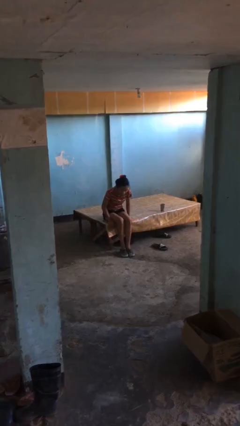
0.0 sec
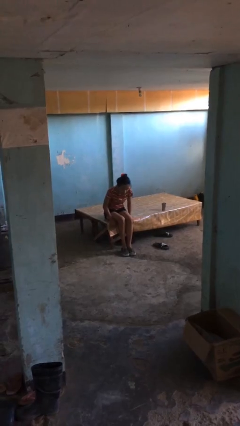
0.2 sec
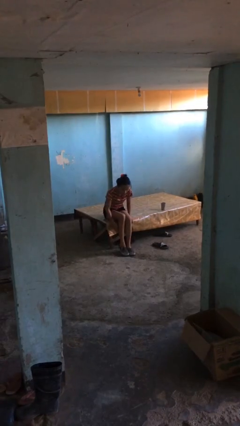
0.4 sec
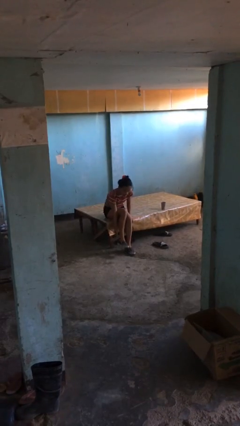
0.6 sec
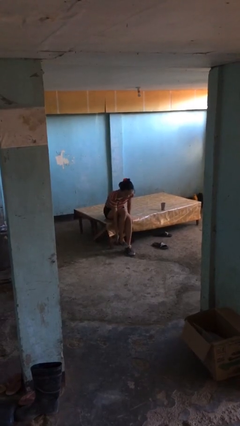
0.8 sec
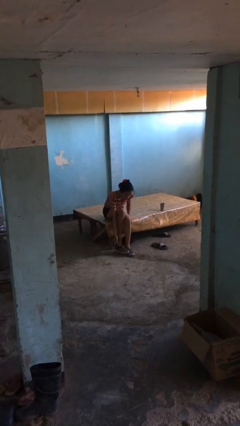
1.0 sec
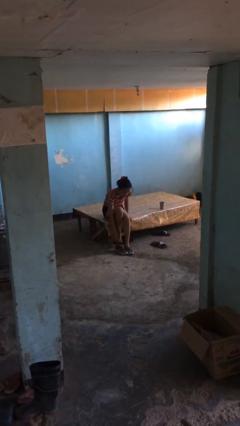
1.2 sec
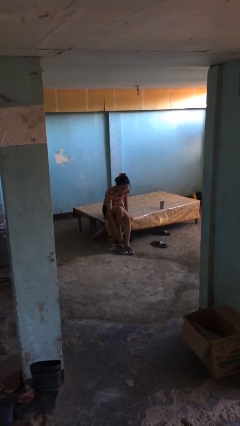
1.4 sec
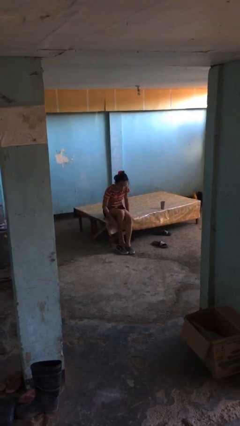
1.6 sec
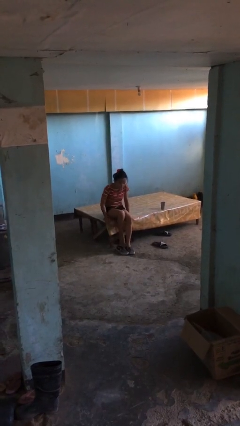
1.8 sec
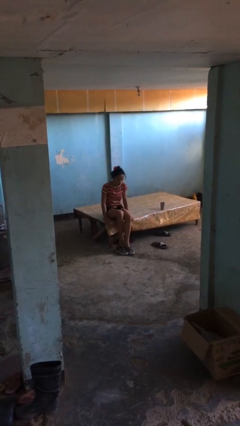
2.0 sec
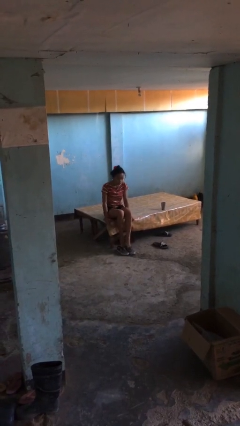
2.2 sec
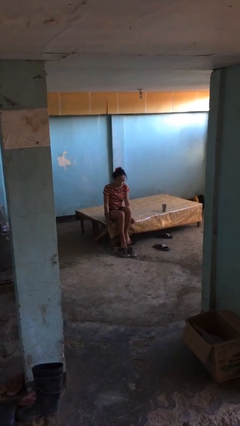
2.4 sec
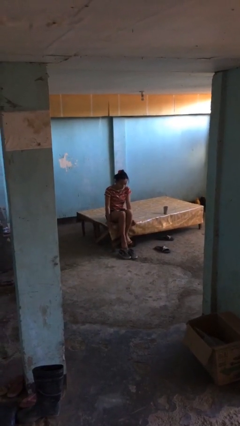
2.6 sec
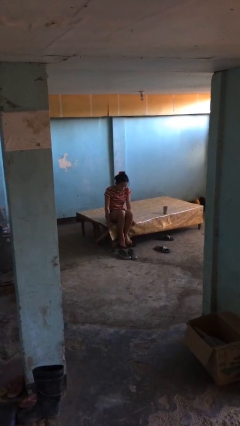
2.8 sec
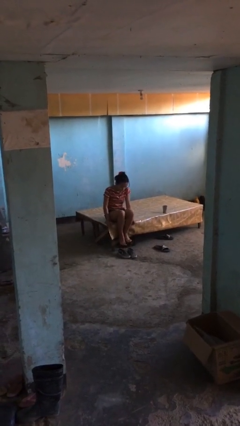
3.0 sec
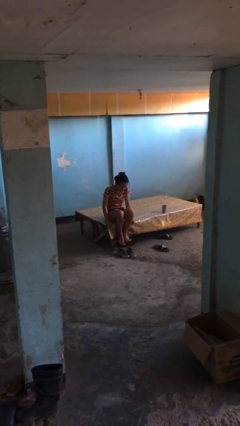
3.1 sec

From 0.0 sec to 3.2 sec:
person takes off shoes

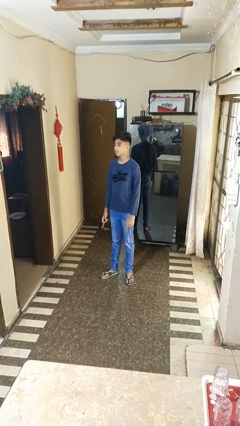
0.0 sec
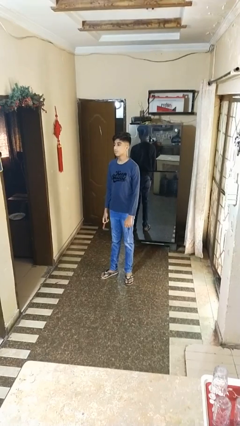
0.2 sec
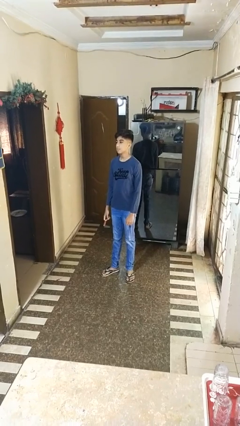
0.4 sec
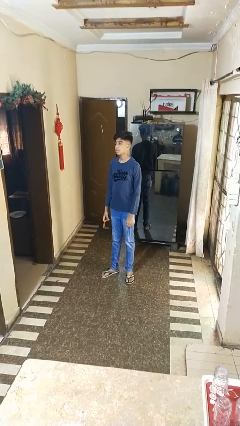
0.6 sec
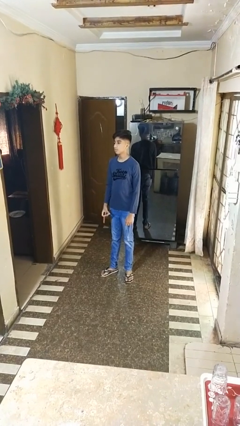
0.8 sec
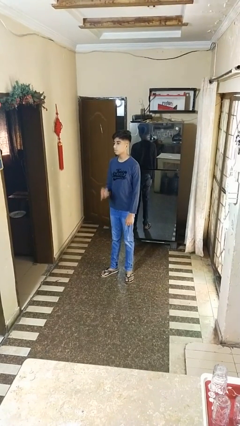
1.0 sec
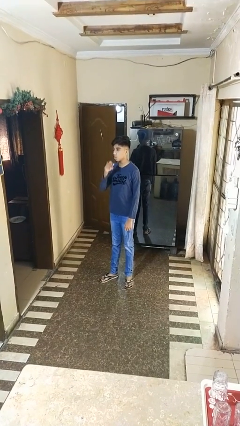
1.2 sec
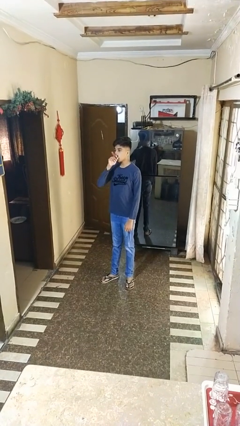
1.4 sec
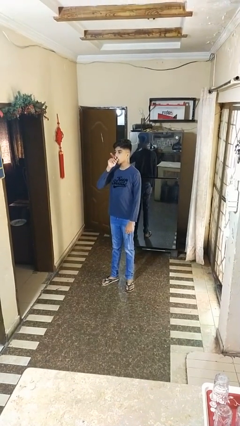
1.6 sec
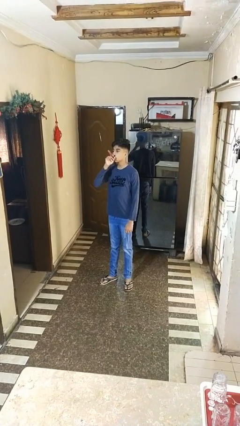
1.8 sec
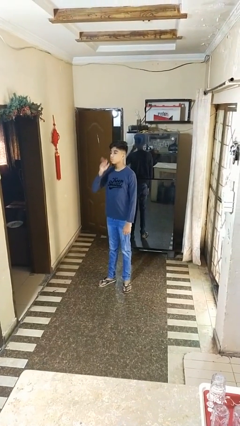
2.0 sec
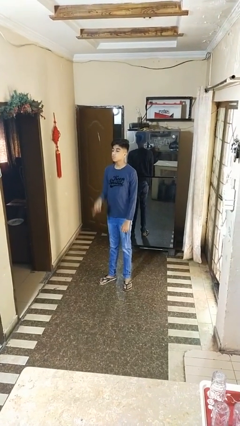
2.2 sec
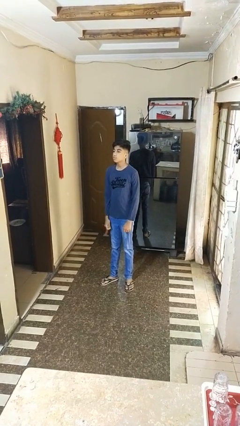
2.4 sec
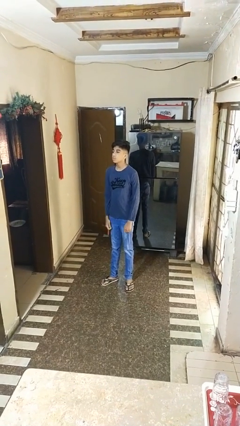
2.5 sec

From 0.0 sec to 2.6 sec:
person vapes

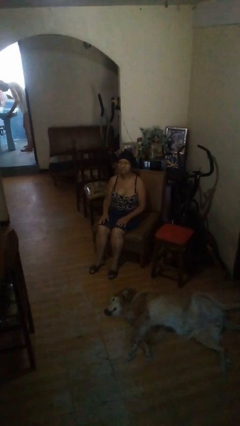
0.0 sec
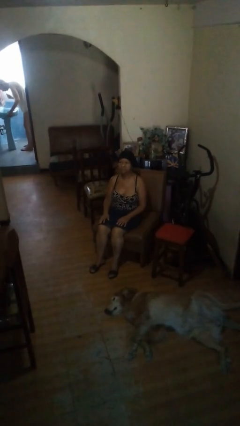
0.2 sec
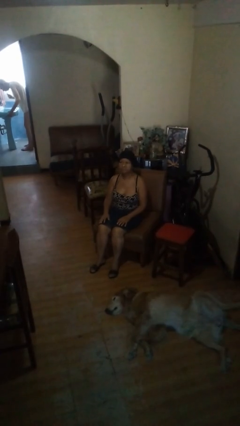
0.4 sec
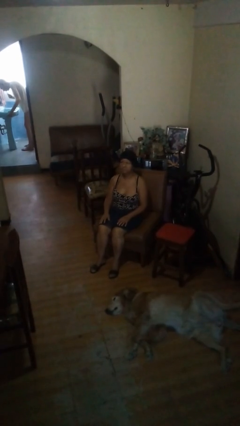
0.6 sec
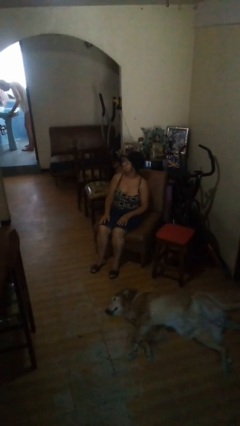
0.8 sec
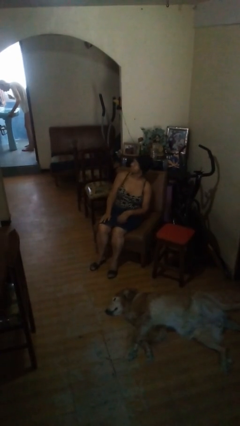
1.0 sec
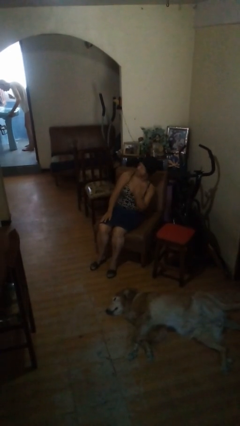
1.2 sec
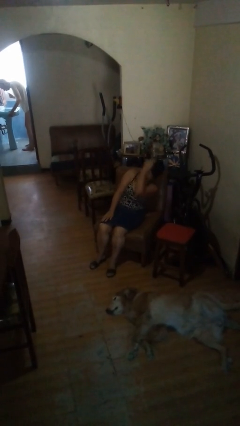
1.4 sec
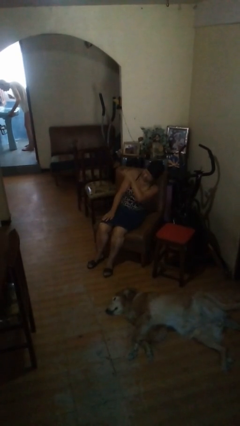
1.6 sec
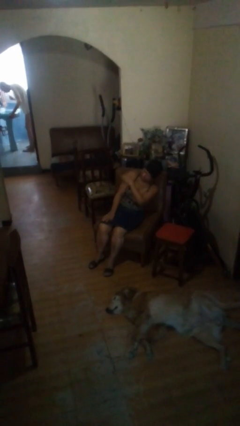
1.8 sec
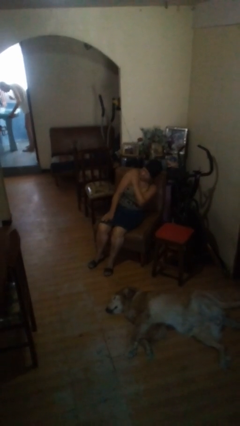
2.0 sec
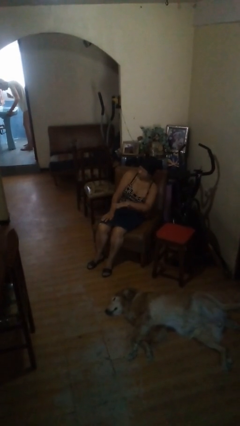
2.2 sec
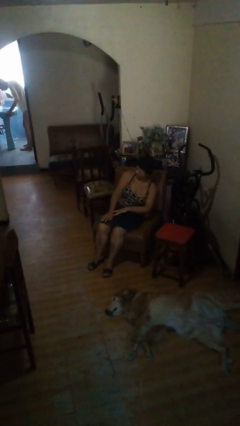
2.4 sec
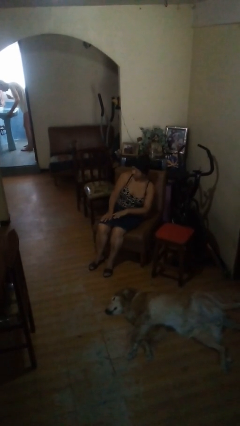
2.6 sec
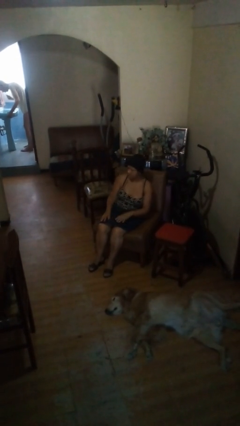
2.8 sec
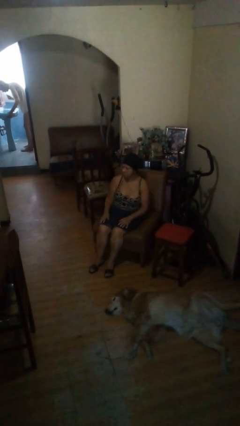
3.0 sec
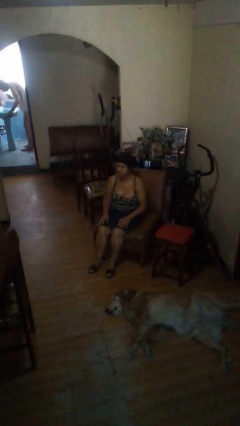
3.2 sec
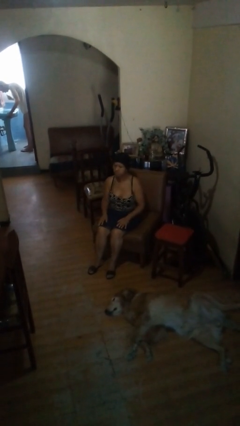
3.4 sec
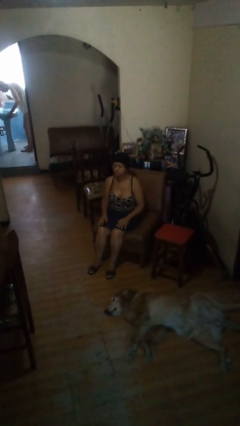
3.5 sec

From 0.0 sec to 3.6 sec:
person swats bug

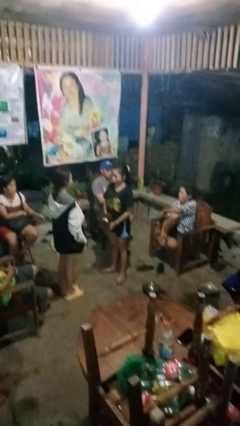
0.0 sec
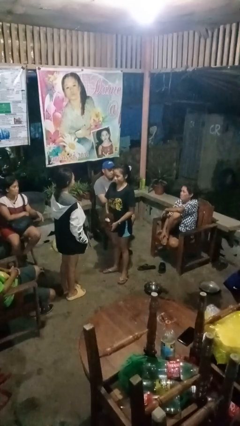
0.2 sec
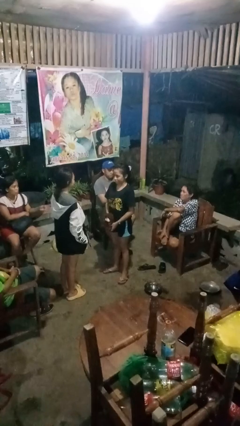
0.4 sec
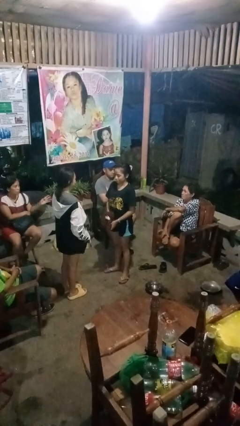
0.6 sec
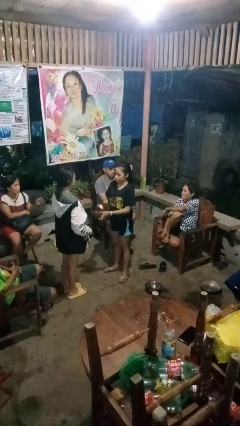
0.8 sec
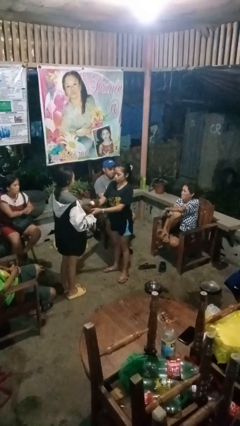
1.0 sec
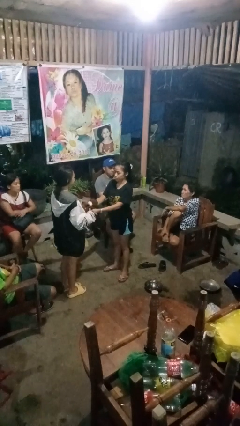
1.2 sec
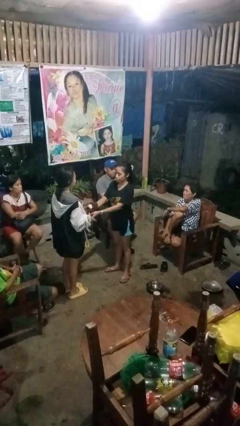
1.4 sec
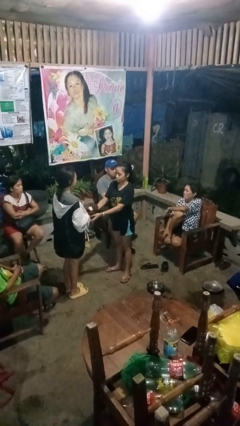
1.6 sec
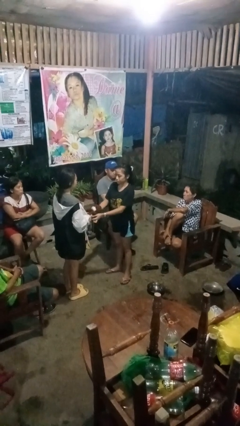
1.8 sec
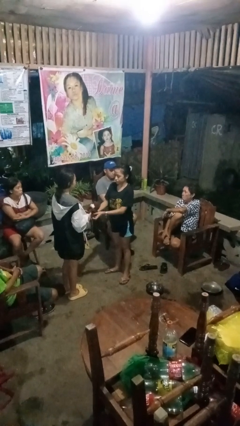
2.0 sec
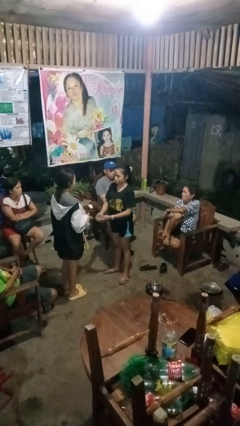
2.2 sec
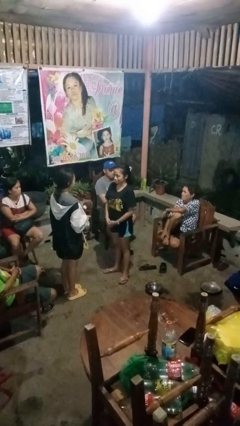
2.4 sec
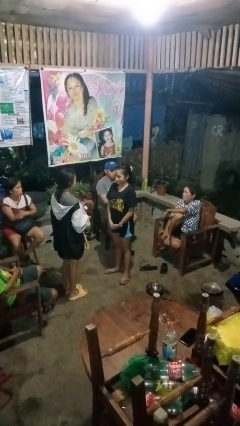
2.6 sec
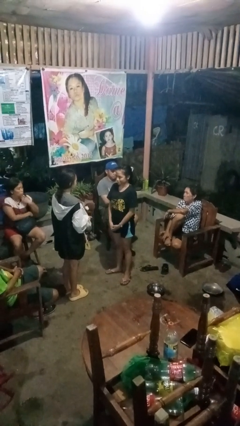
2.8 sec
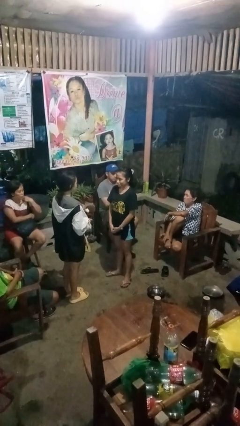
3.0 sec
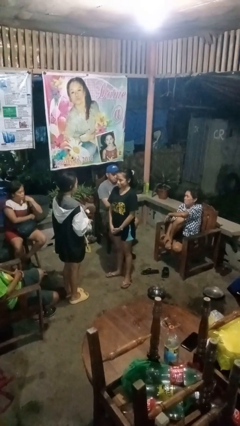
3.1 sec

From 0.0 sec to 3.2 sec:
person transfers object to person

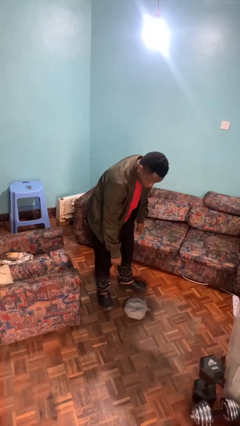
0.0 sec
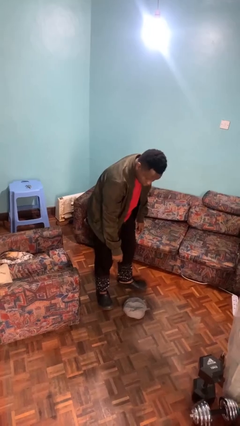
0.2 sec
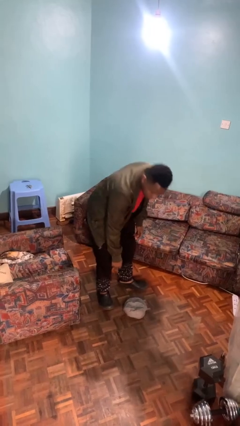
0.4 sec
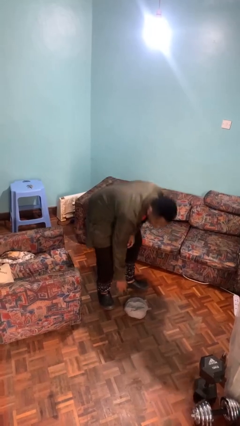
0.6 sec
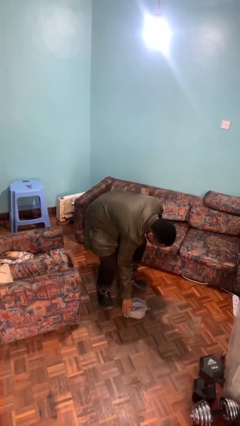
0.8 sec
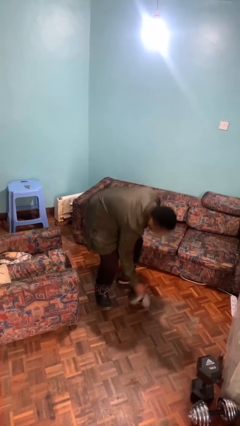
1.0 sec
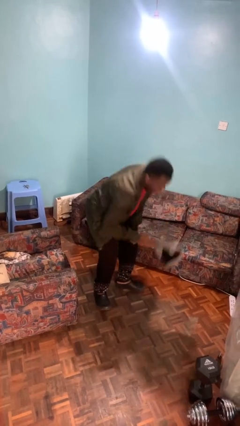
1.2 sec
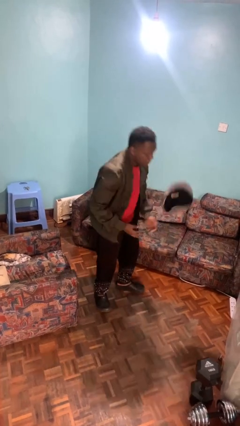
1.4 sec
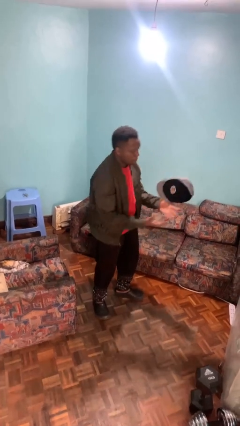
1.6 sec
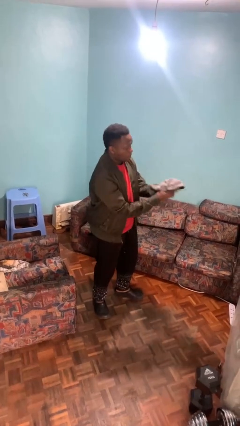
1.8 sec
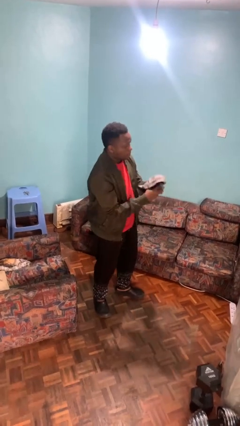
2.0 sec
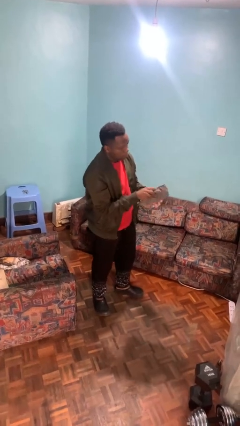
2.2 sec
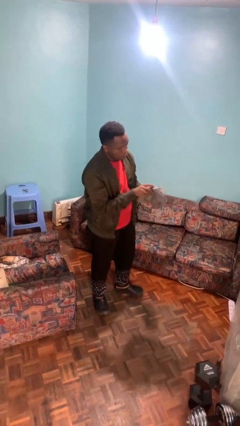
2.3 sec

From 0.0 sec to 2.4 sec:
person picks up object from floor

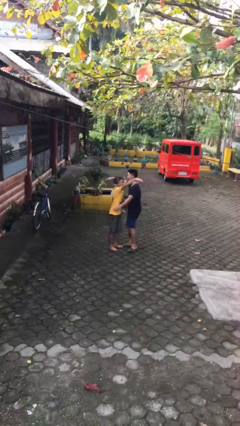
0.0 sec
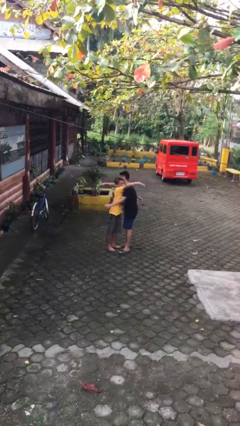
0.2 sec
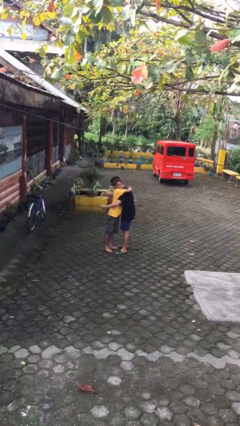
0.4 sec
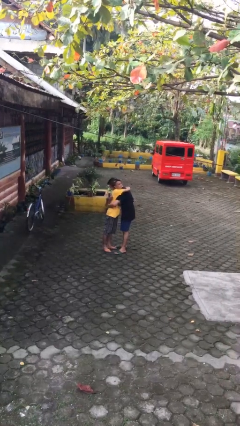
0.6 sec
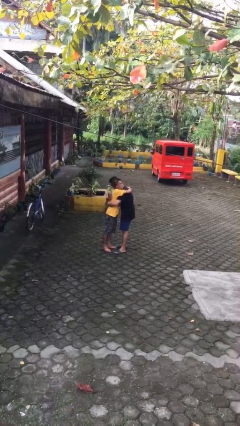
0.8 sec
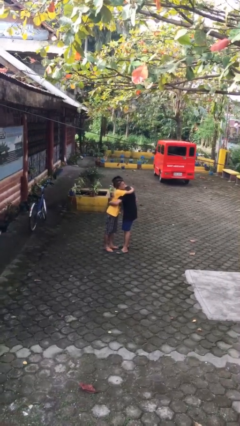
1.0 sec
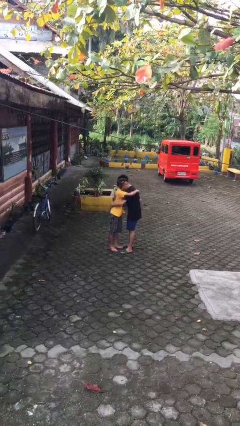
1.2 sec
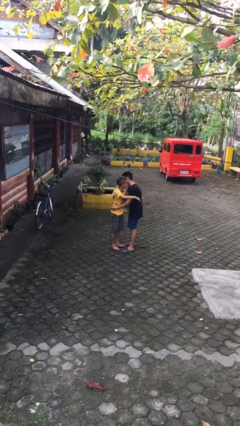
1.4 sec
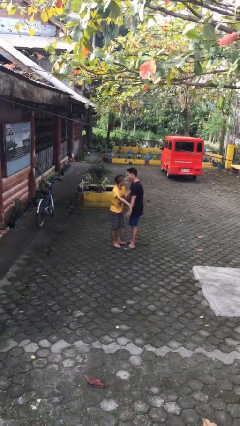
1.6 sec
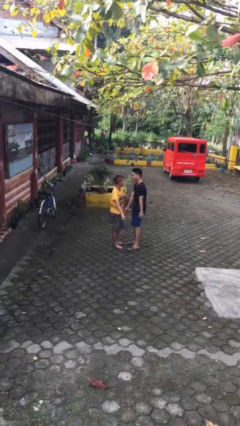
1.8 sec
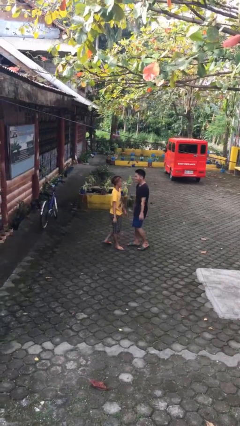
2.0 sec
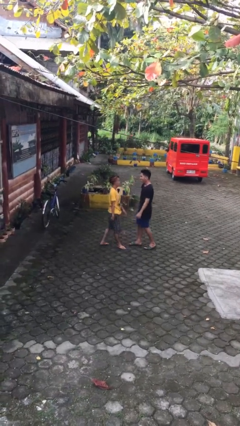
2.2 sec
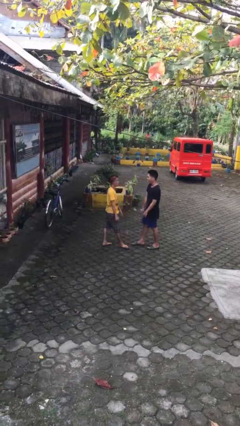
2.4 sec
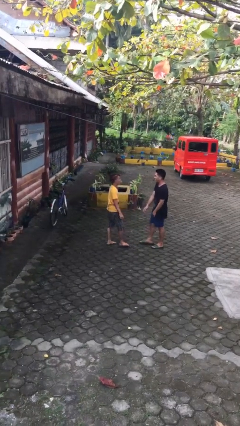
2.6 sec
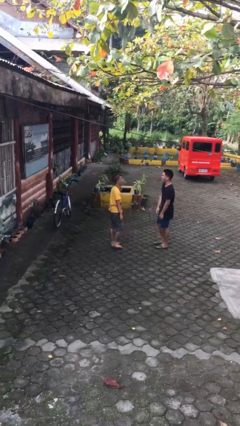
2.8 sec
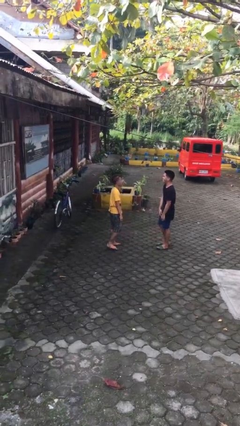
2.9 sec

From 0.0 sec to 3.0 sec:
person embraces person
